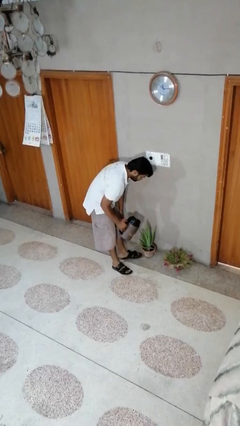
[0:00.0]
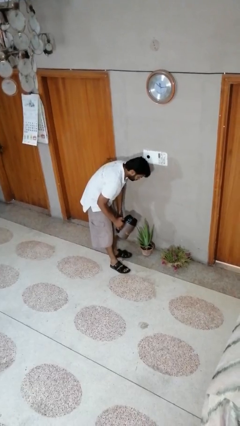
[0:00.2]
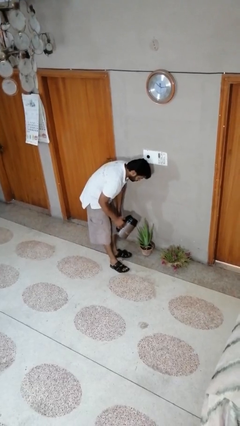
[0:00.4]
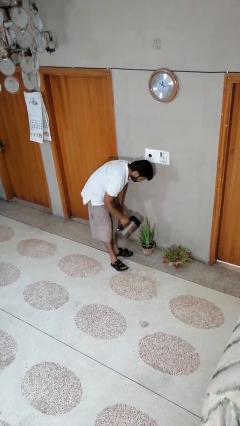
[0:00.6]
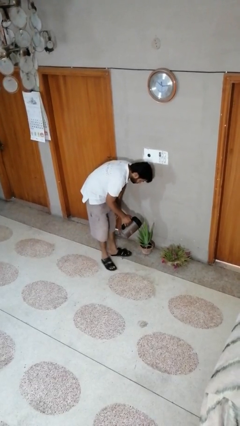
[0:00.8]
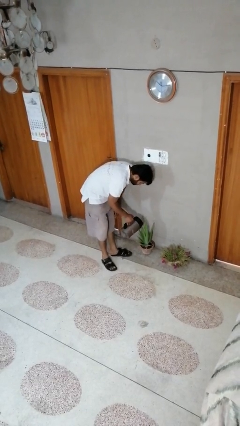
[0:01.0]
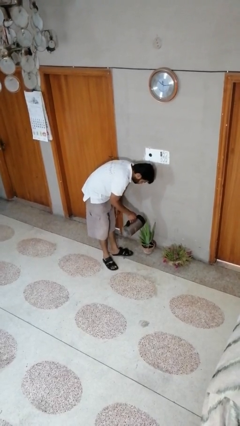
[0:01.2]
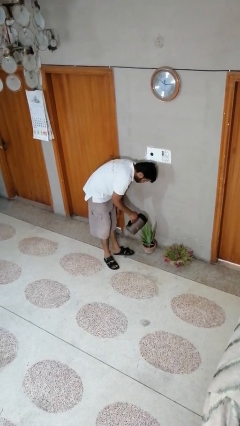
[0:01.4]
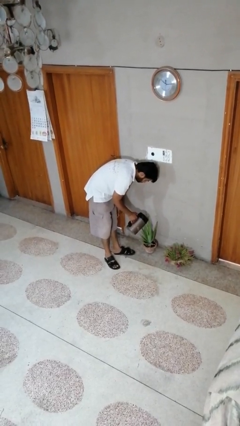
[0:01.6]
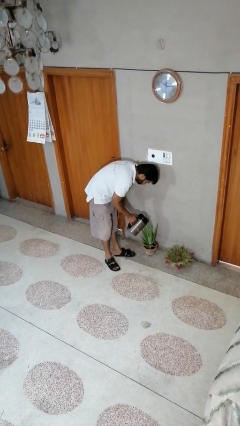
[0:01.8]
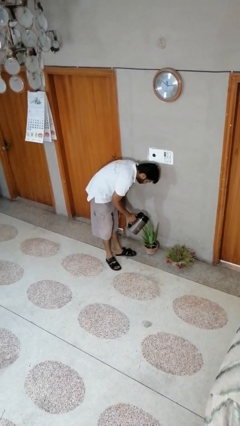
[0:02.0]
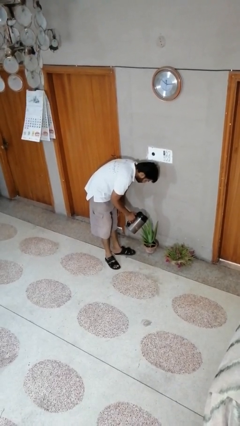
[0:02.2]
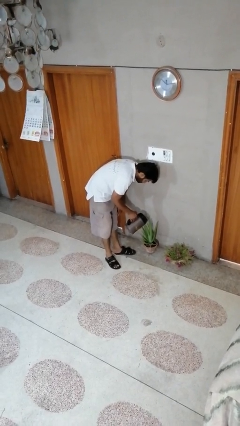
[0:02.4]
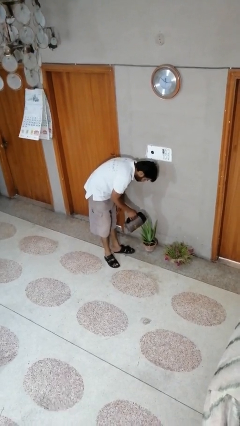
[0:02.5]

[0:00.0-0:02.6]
person waters houseplant

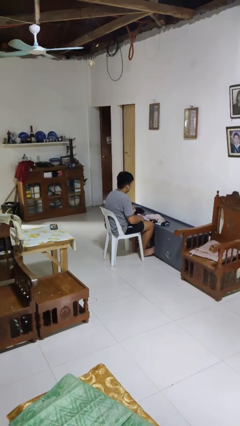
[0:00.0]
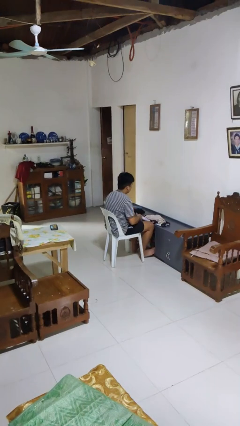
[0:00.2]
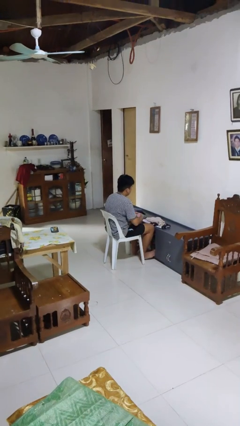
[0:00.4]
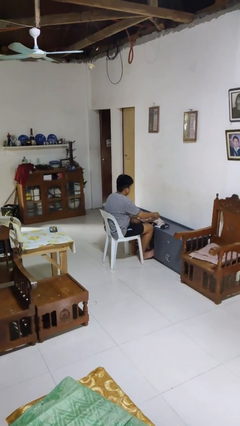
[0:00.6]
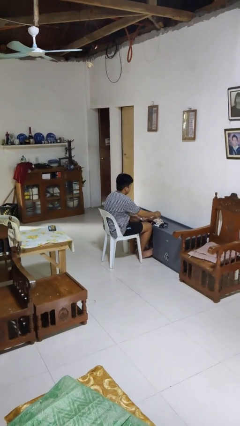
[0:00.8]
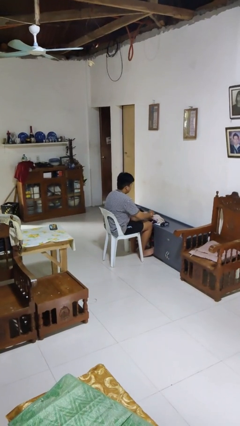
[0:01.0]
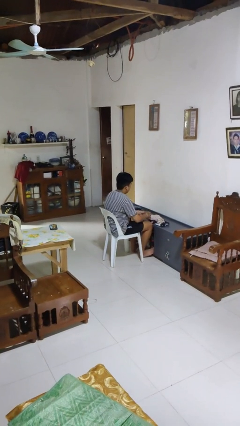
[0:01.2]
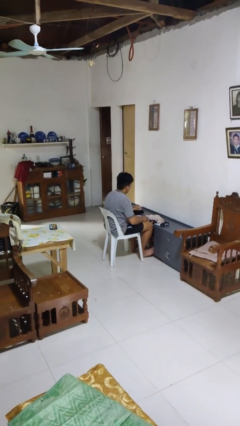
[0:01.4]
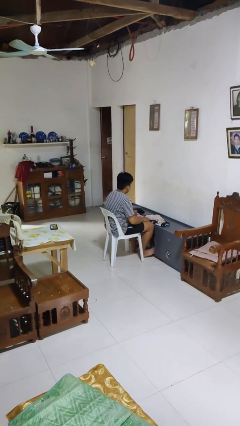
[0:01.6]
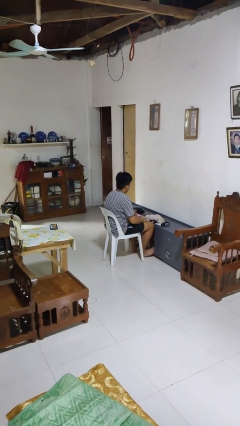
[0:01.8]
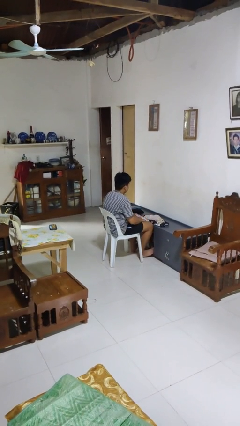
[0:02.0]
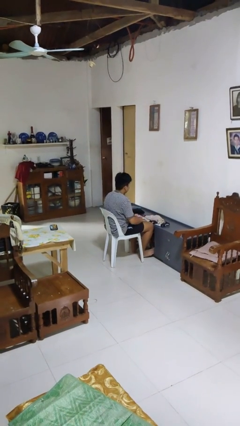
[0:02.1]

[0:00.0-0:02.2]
person folds socks

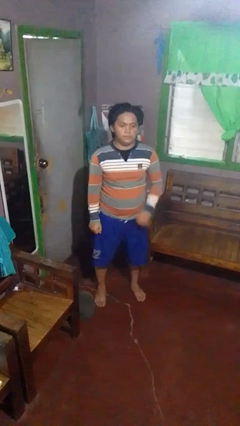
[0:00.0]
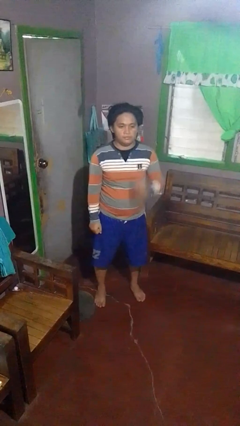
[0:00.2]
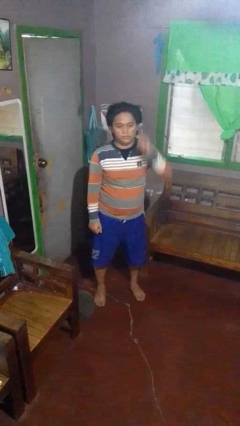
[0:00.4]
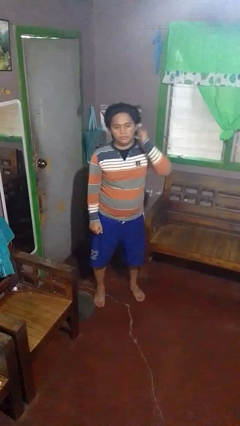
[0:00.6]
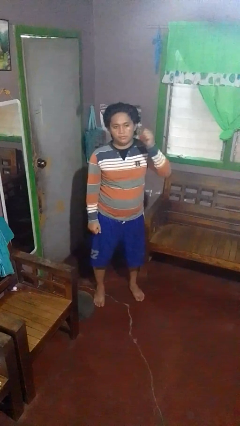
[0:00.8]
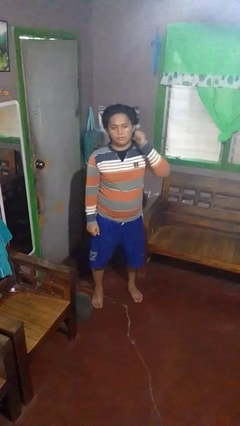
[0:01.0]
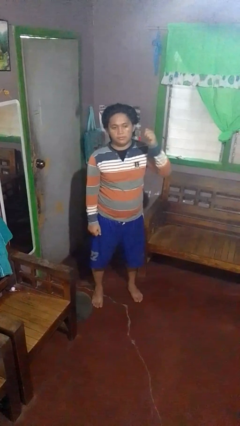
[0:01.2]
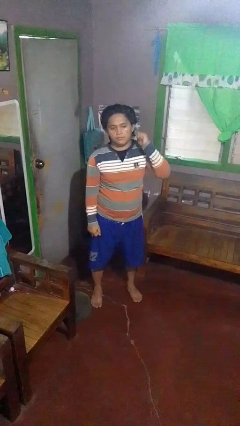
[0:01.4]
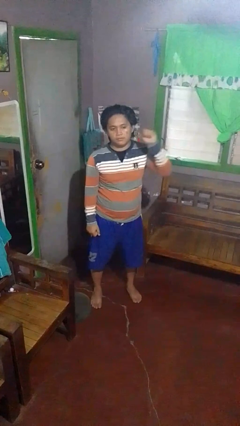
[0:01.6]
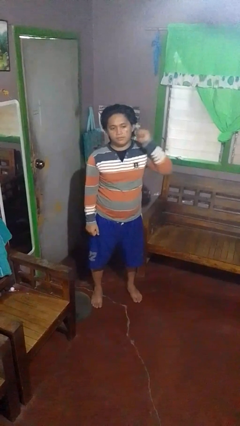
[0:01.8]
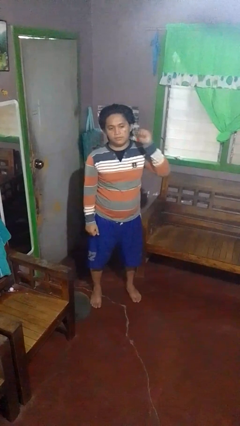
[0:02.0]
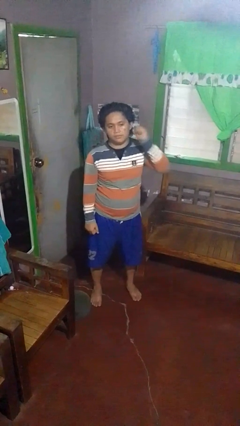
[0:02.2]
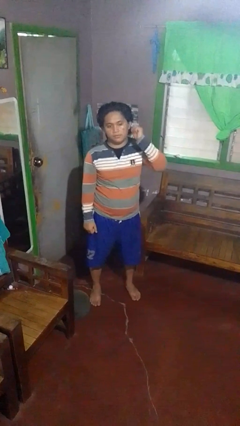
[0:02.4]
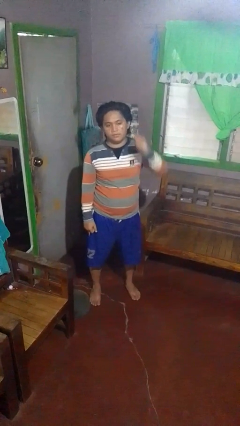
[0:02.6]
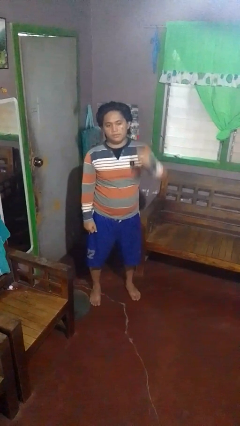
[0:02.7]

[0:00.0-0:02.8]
person gestures behind me

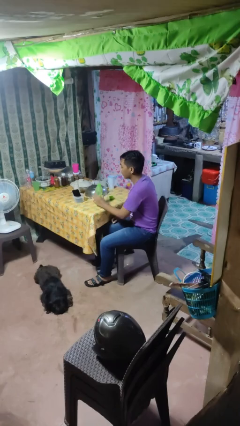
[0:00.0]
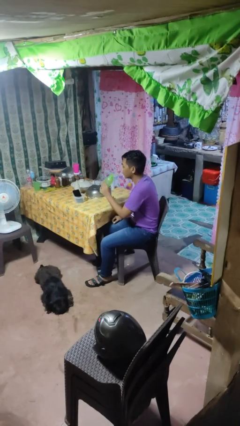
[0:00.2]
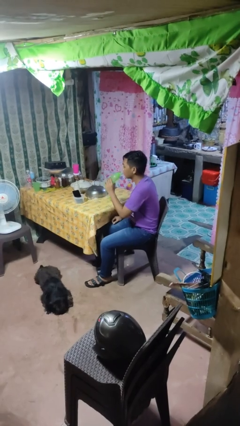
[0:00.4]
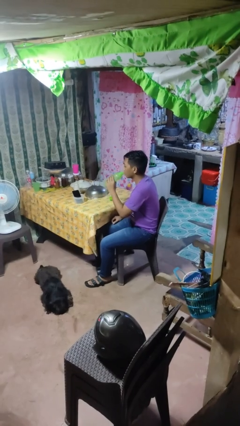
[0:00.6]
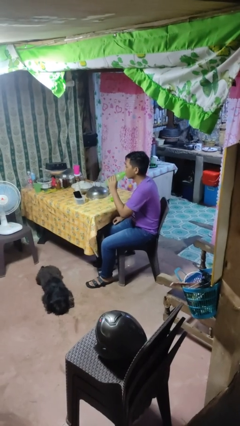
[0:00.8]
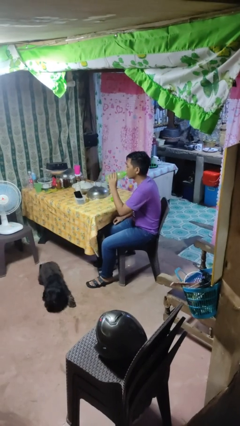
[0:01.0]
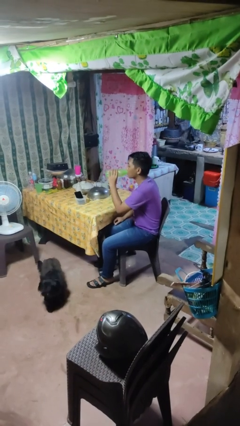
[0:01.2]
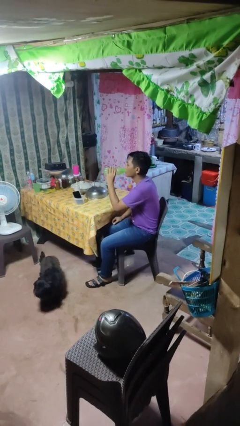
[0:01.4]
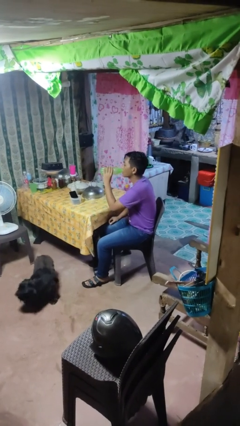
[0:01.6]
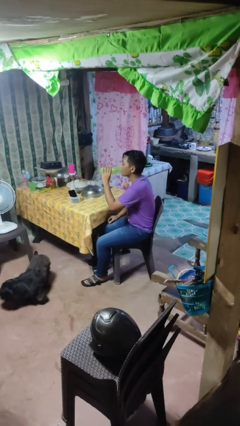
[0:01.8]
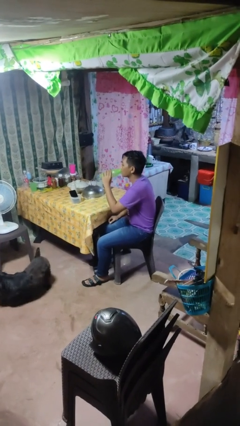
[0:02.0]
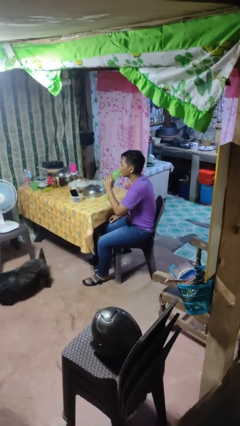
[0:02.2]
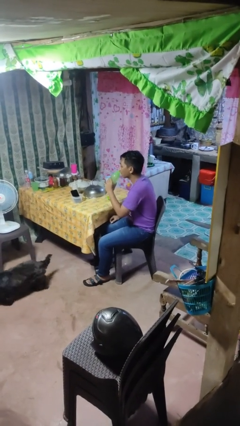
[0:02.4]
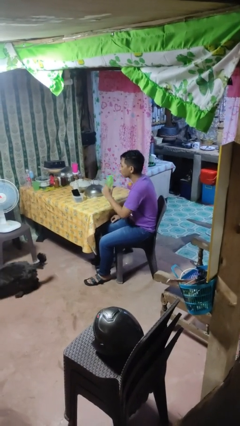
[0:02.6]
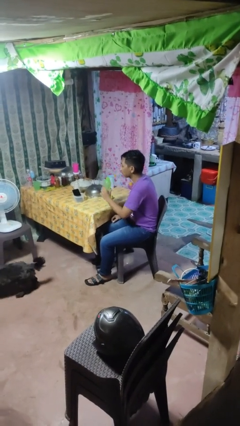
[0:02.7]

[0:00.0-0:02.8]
person drinks from bottle

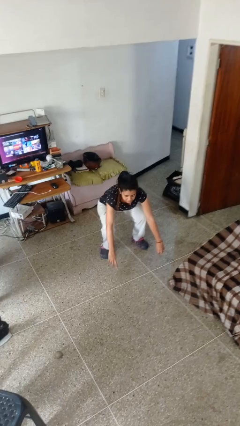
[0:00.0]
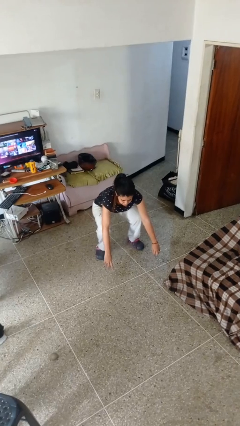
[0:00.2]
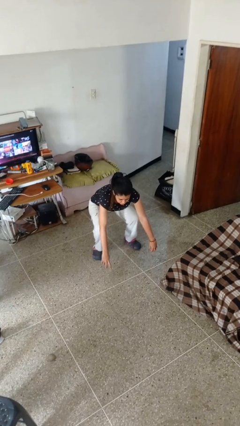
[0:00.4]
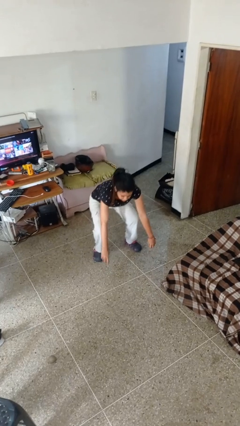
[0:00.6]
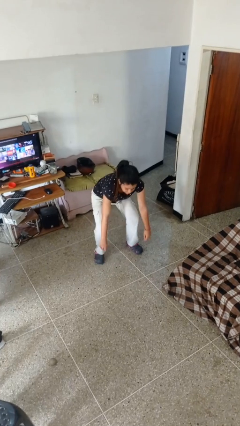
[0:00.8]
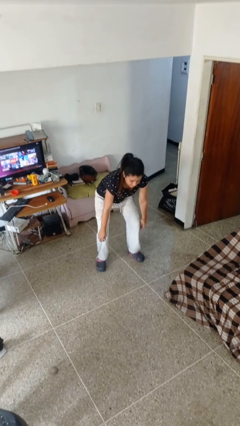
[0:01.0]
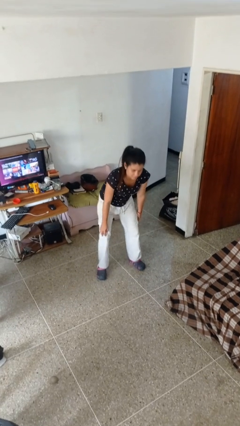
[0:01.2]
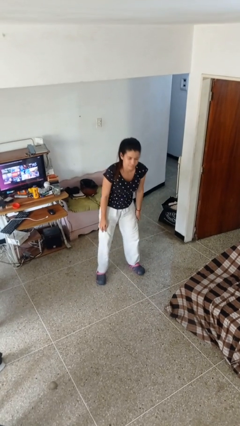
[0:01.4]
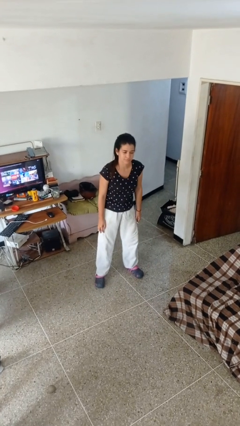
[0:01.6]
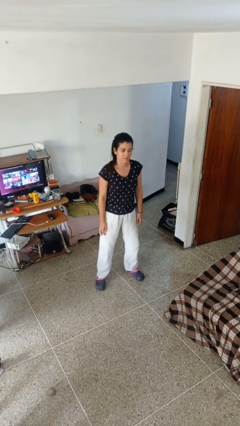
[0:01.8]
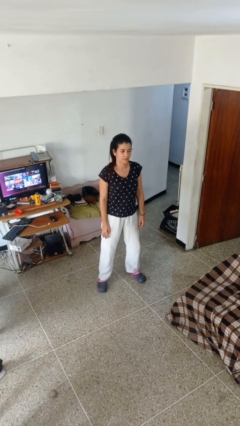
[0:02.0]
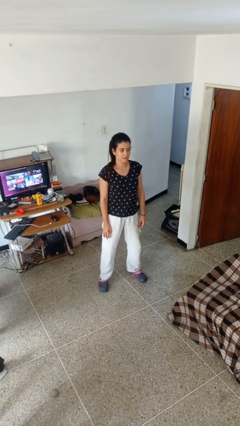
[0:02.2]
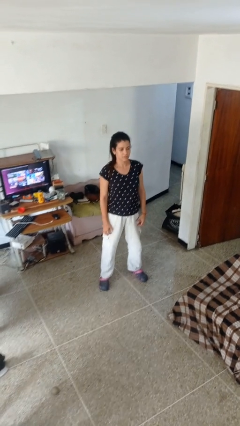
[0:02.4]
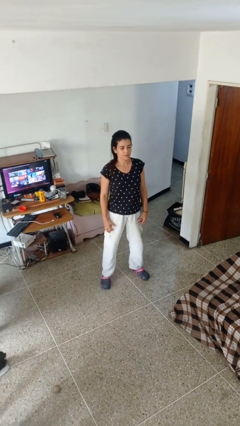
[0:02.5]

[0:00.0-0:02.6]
person stands up

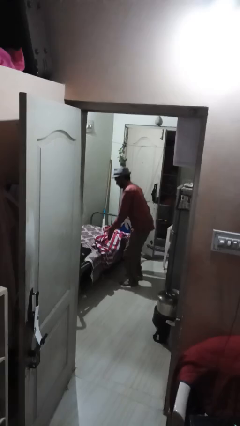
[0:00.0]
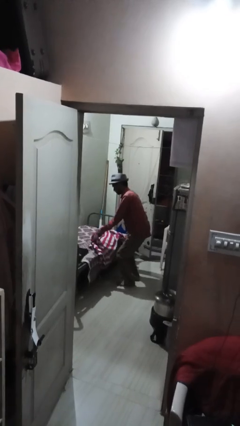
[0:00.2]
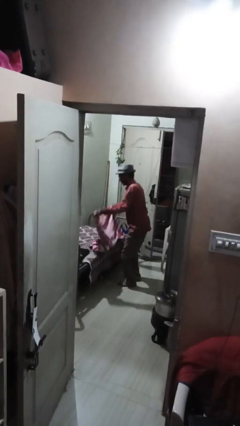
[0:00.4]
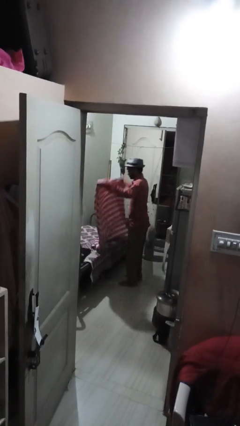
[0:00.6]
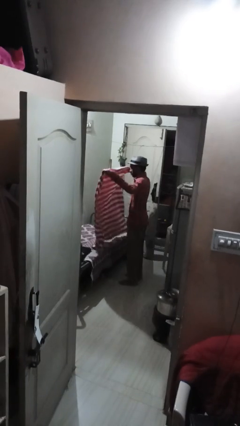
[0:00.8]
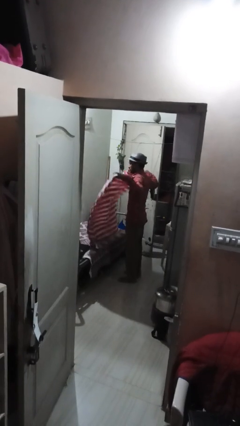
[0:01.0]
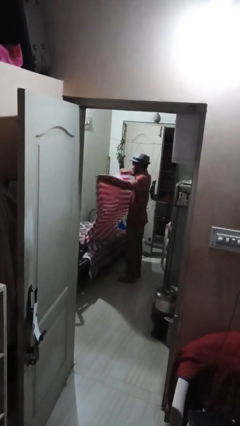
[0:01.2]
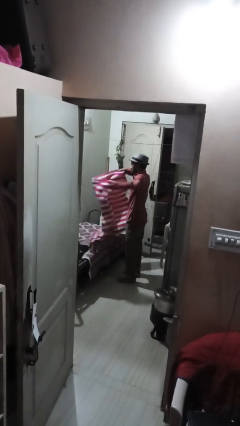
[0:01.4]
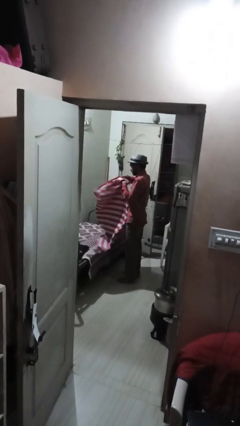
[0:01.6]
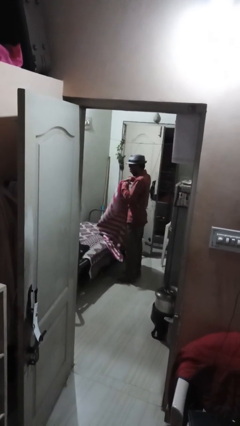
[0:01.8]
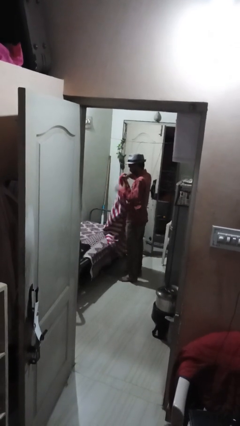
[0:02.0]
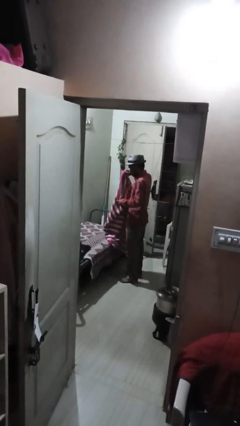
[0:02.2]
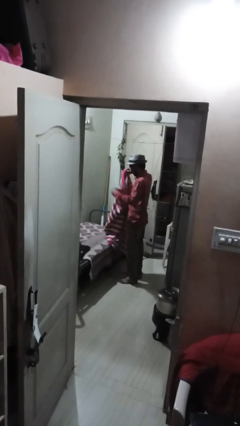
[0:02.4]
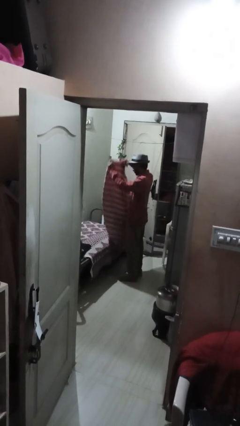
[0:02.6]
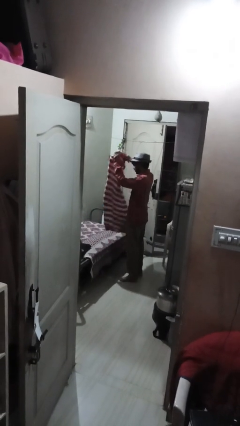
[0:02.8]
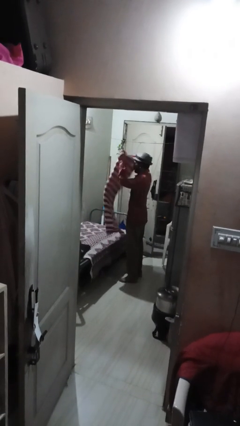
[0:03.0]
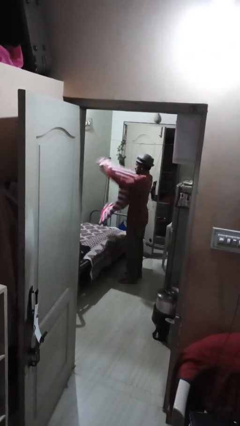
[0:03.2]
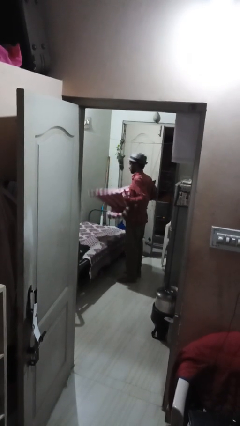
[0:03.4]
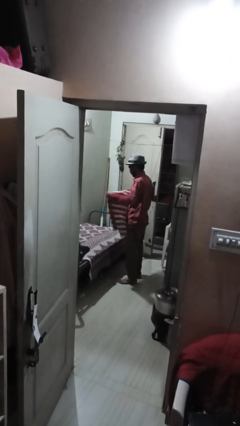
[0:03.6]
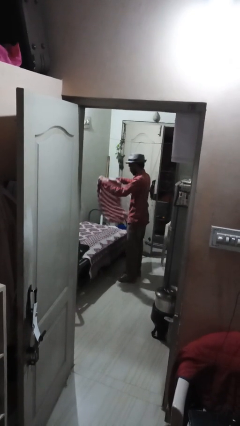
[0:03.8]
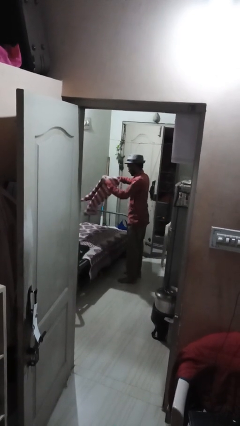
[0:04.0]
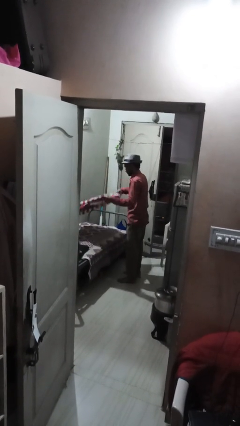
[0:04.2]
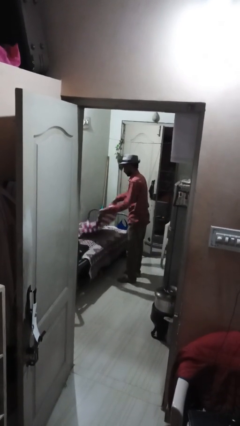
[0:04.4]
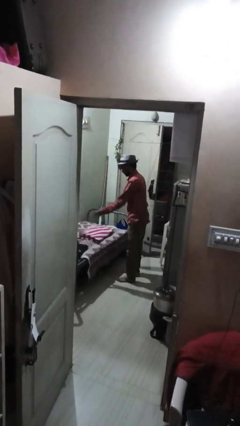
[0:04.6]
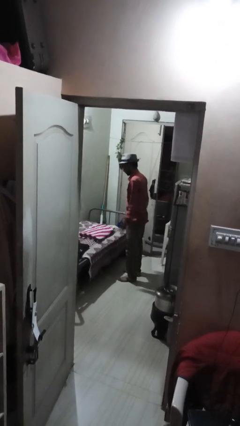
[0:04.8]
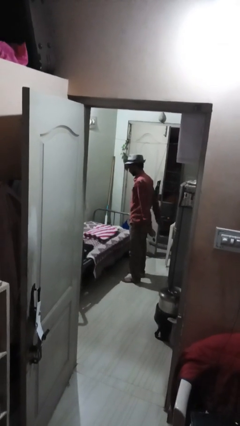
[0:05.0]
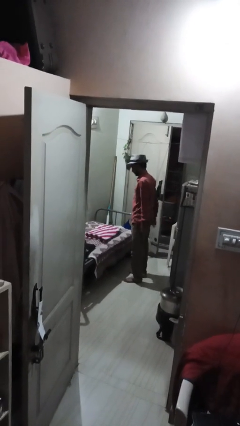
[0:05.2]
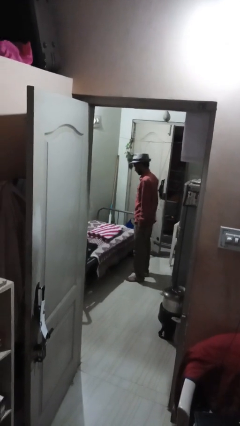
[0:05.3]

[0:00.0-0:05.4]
person folds blanket
